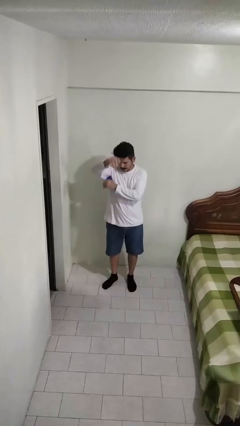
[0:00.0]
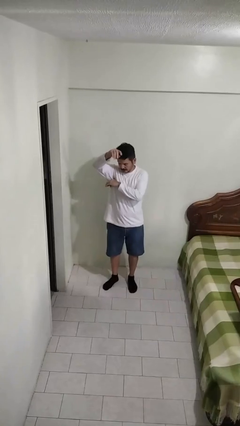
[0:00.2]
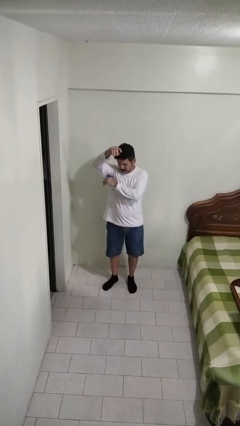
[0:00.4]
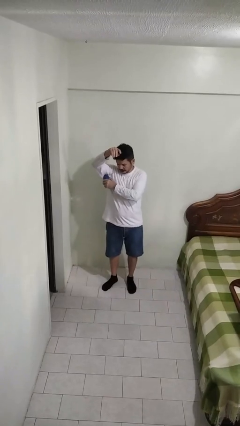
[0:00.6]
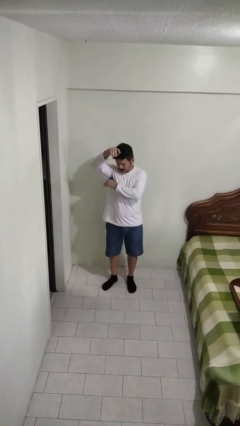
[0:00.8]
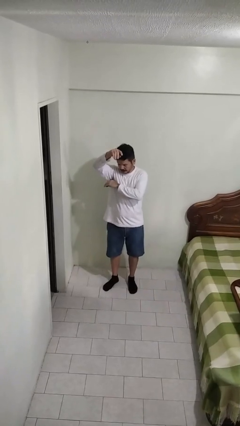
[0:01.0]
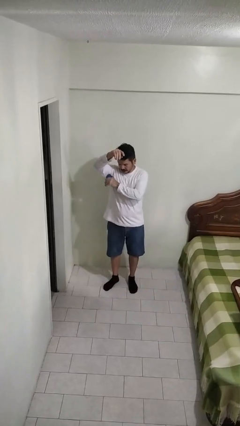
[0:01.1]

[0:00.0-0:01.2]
person applies deodorant

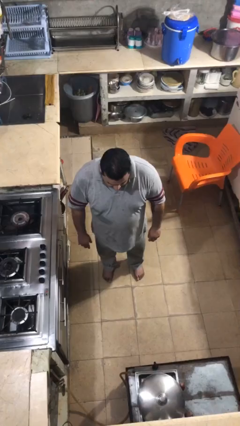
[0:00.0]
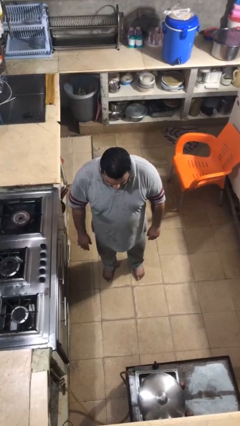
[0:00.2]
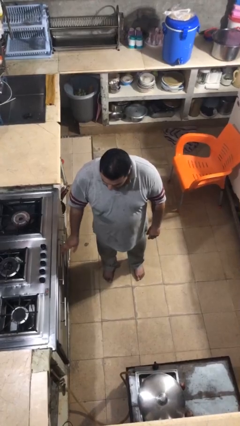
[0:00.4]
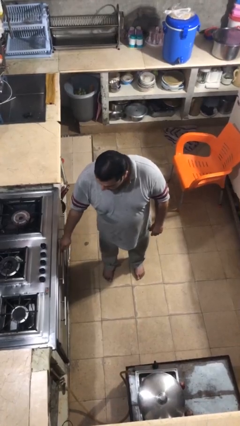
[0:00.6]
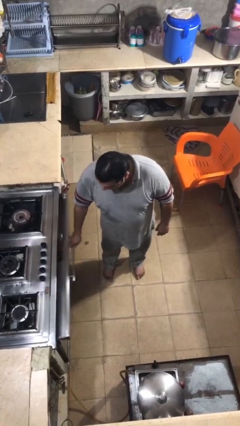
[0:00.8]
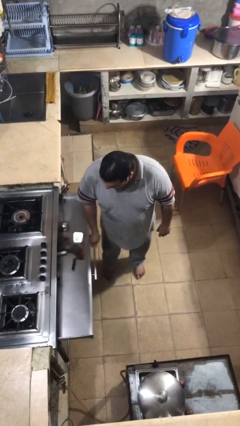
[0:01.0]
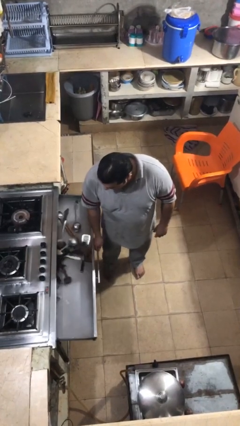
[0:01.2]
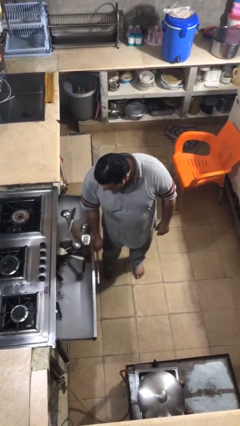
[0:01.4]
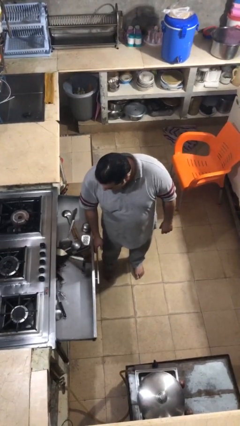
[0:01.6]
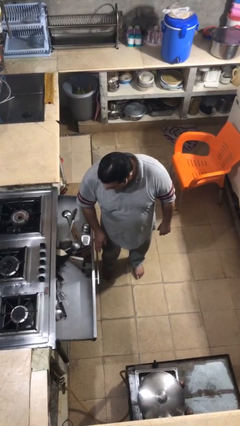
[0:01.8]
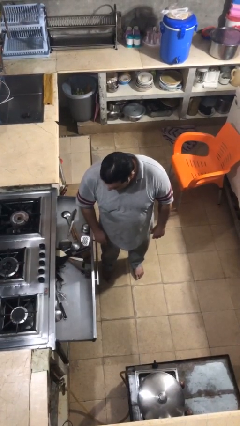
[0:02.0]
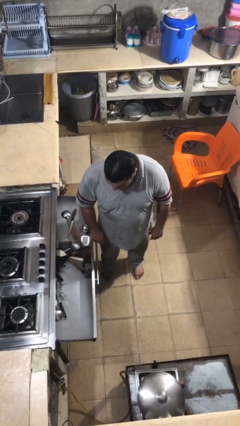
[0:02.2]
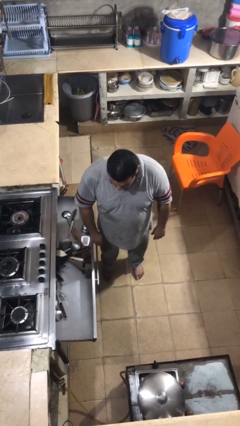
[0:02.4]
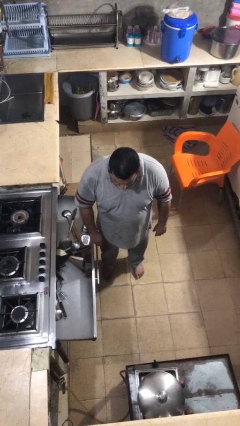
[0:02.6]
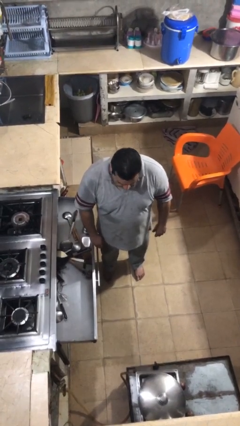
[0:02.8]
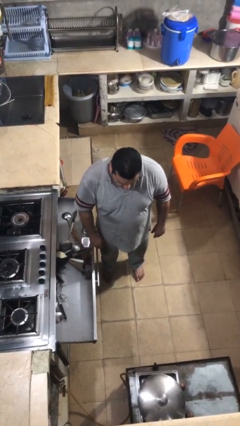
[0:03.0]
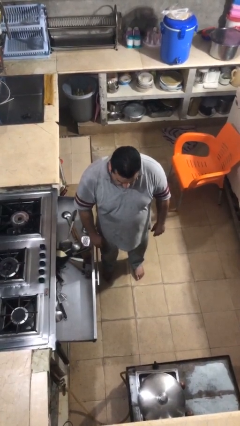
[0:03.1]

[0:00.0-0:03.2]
person opens kitchen drawer

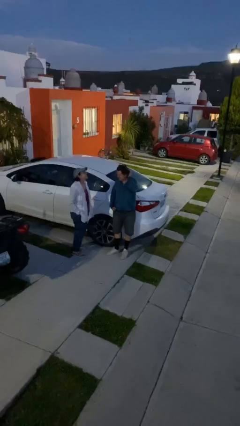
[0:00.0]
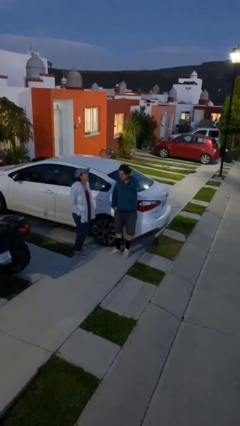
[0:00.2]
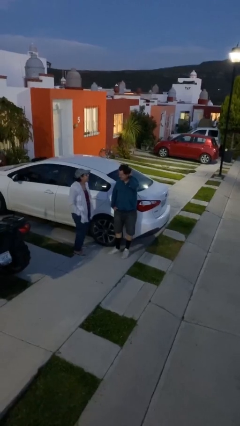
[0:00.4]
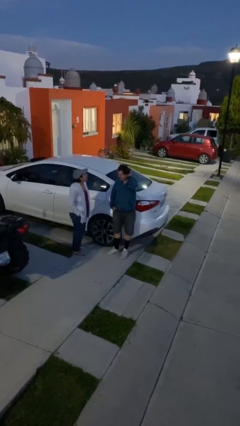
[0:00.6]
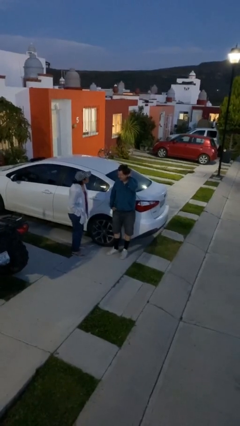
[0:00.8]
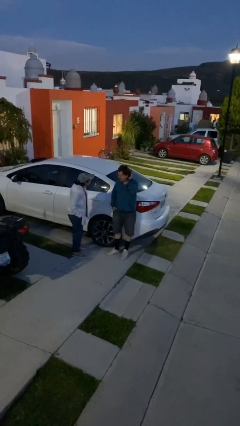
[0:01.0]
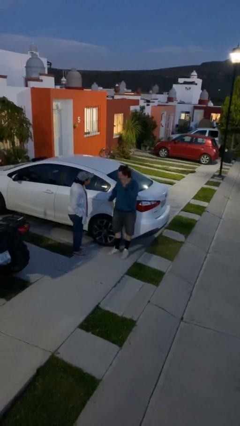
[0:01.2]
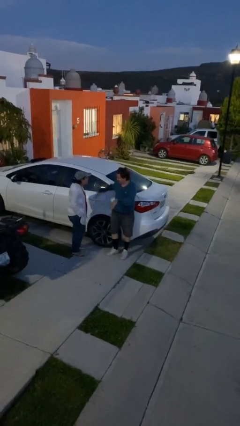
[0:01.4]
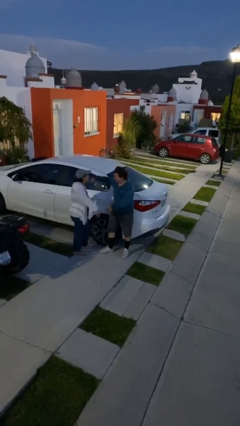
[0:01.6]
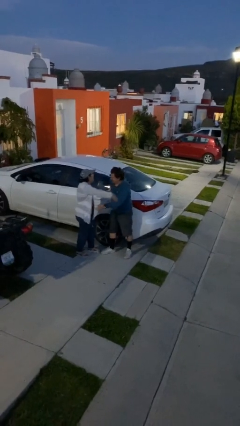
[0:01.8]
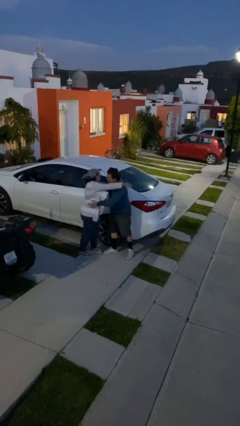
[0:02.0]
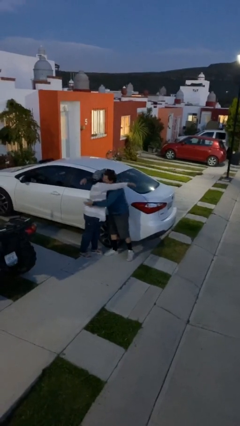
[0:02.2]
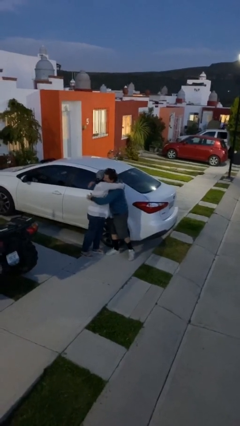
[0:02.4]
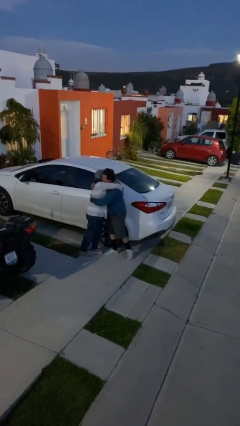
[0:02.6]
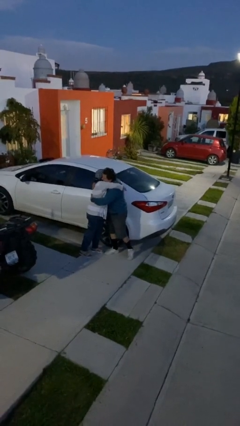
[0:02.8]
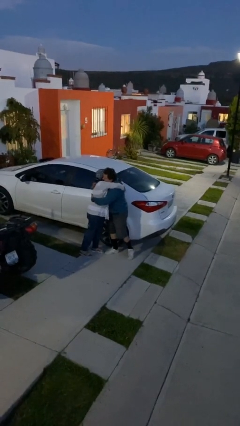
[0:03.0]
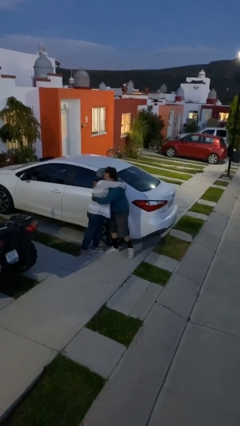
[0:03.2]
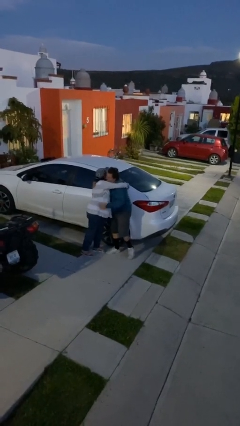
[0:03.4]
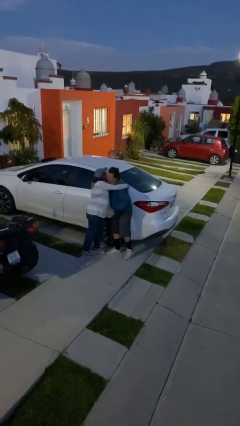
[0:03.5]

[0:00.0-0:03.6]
person embraces person

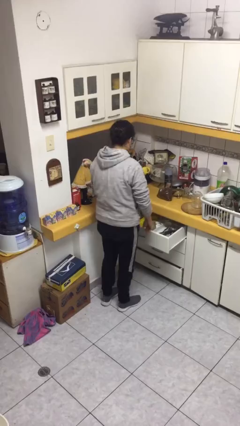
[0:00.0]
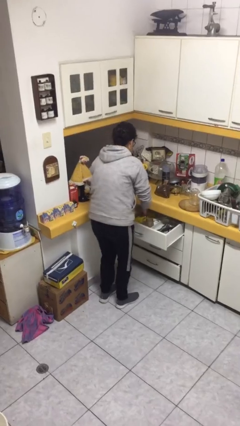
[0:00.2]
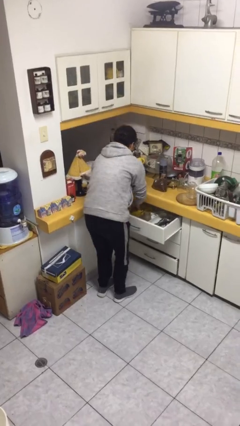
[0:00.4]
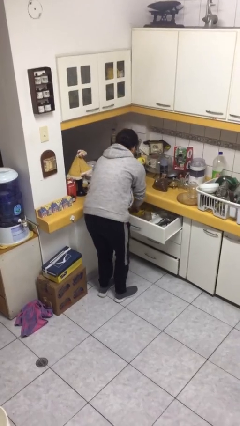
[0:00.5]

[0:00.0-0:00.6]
person searches in kitchen drawer

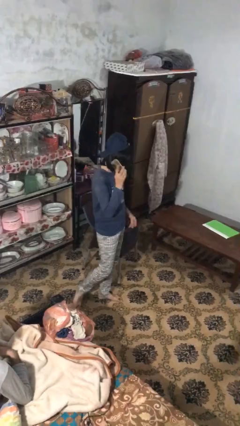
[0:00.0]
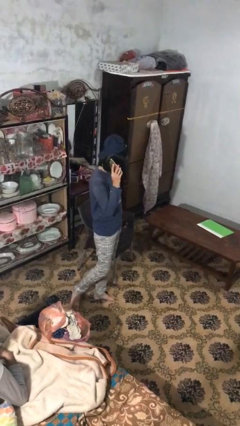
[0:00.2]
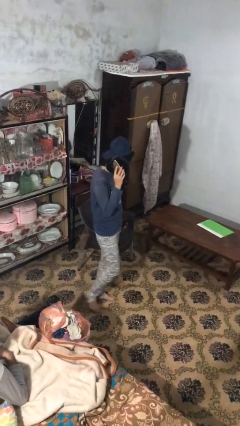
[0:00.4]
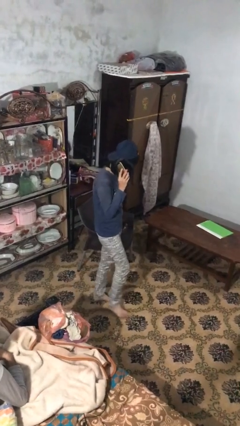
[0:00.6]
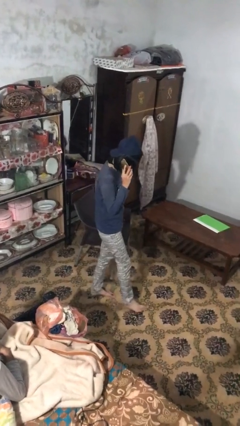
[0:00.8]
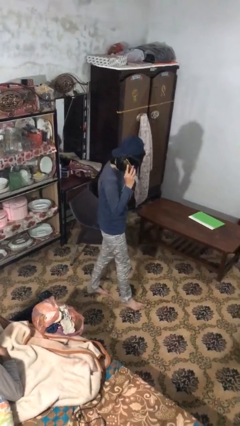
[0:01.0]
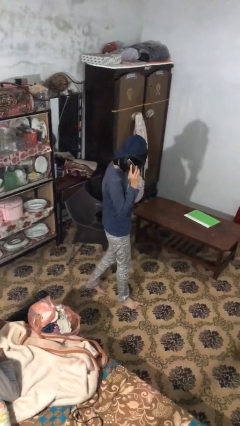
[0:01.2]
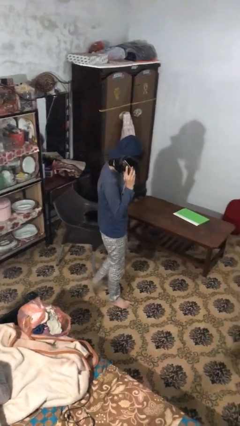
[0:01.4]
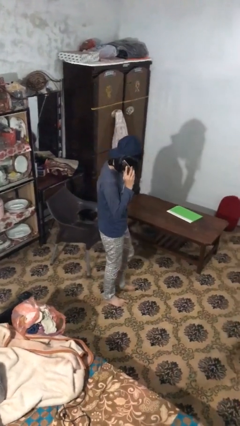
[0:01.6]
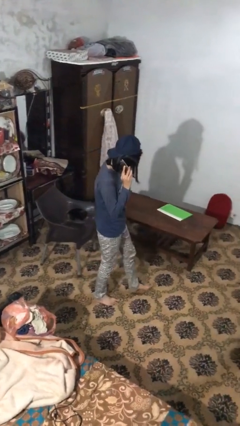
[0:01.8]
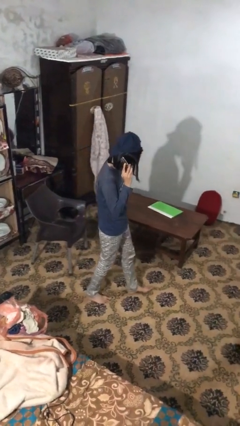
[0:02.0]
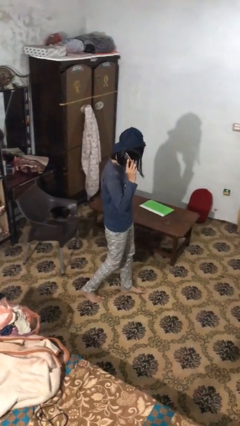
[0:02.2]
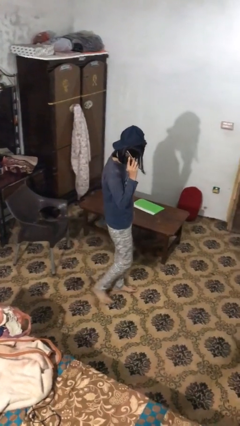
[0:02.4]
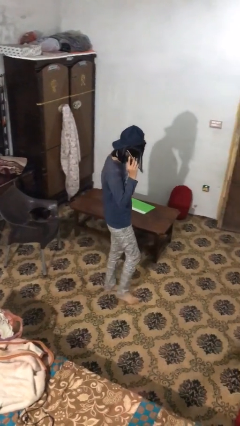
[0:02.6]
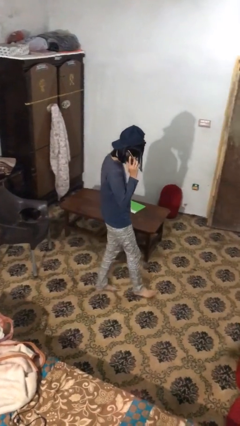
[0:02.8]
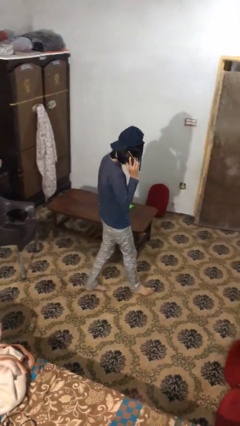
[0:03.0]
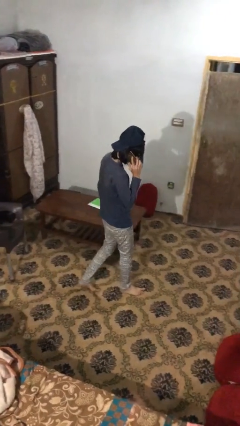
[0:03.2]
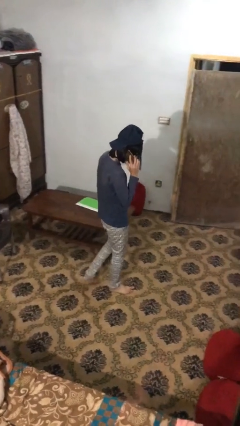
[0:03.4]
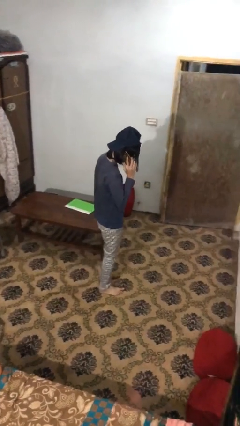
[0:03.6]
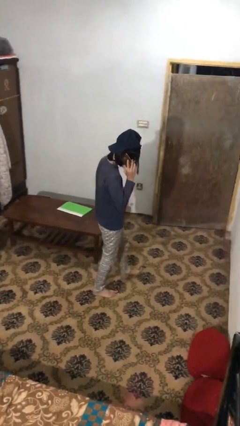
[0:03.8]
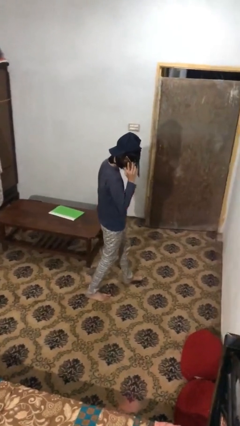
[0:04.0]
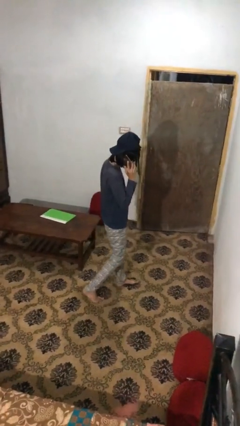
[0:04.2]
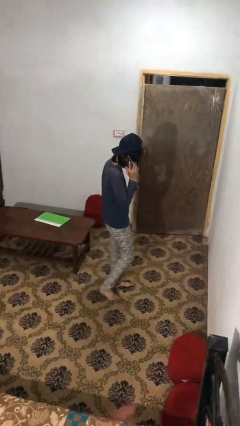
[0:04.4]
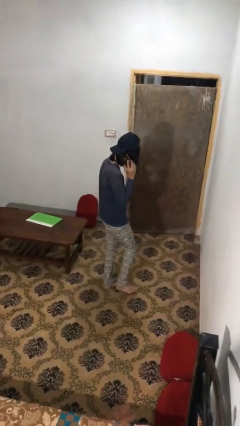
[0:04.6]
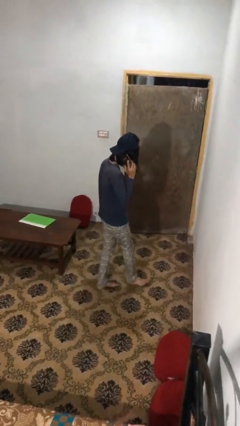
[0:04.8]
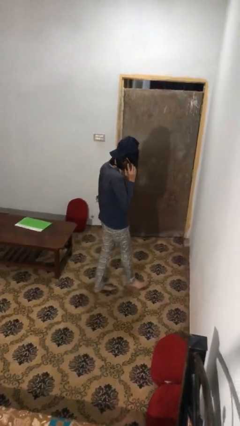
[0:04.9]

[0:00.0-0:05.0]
person talks on phone

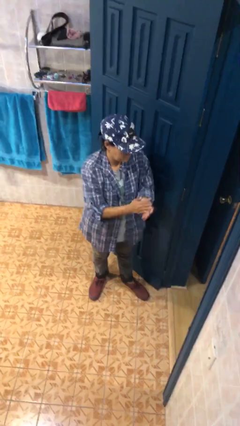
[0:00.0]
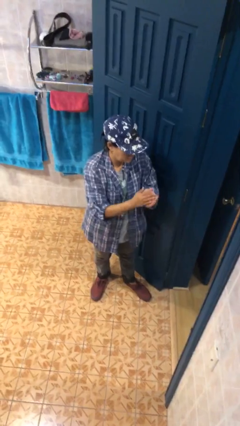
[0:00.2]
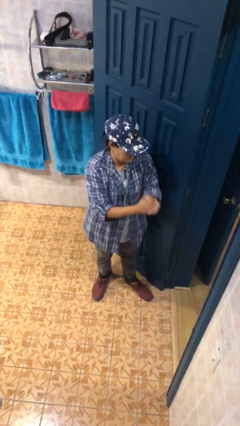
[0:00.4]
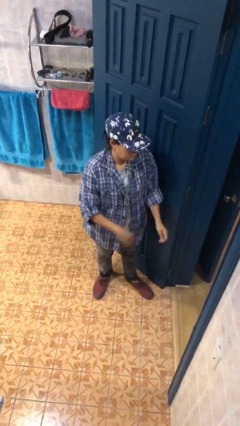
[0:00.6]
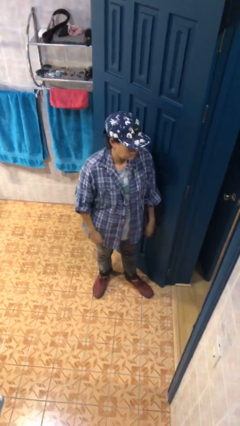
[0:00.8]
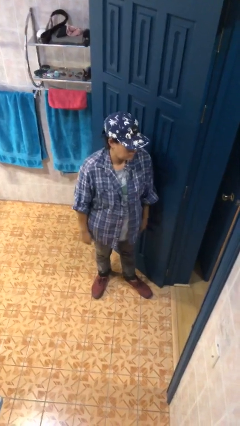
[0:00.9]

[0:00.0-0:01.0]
person claps hands

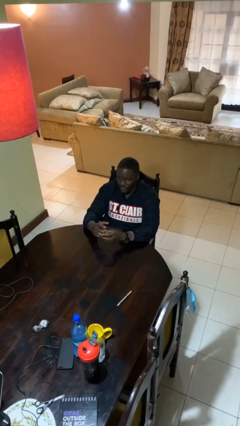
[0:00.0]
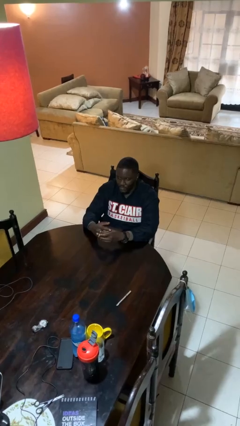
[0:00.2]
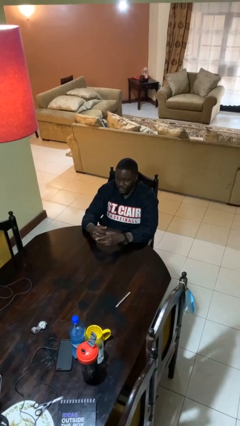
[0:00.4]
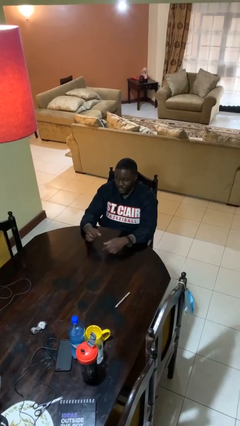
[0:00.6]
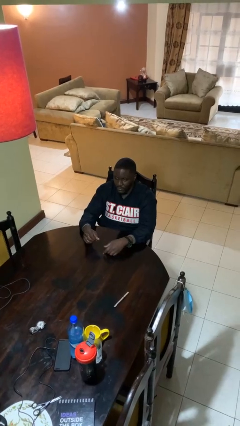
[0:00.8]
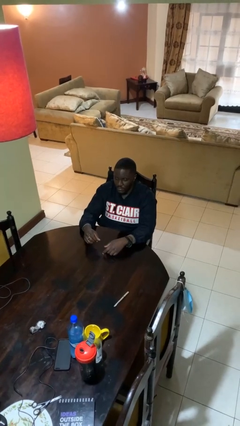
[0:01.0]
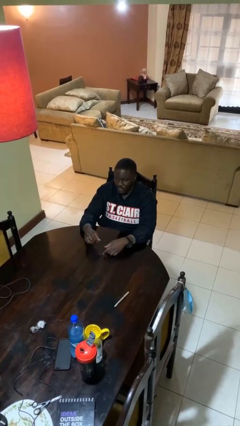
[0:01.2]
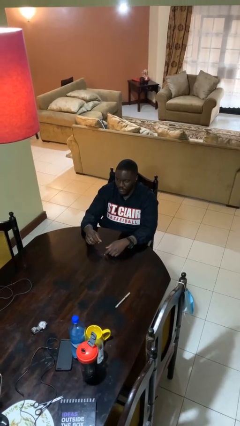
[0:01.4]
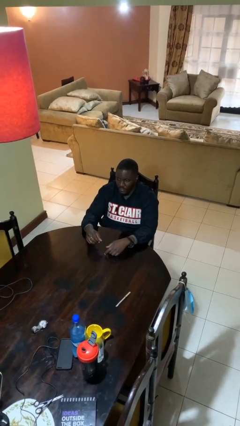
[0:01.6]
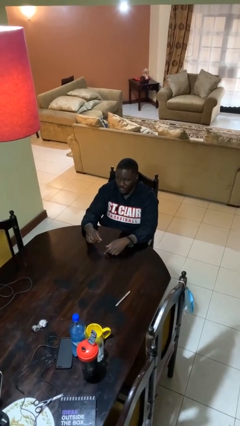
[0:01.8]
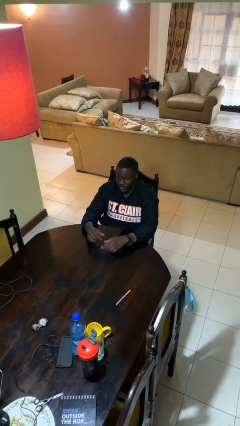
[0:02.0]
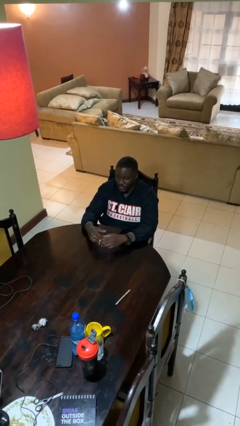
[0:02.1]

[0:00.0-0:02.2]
person puts on ring
